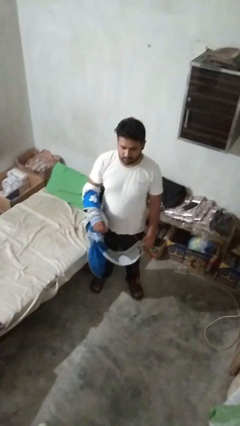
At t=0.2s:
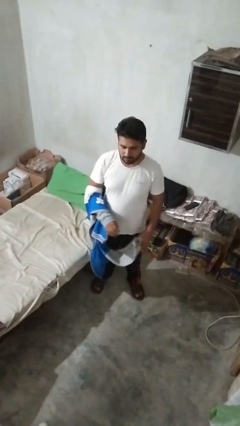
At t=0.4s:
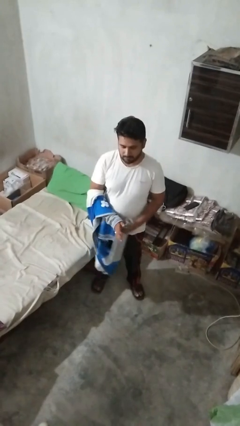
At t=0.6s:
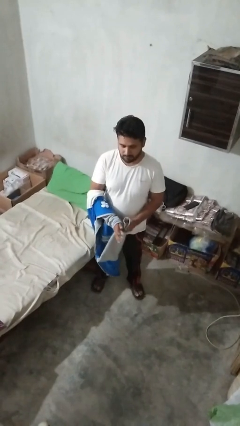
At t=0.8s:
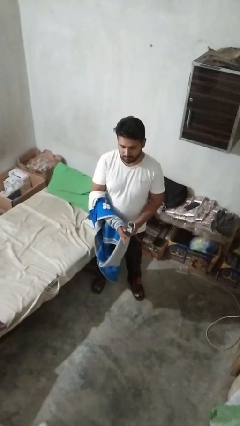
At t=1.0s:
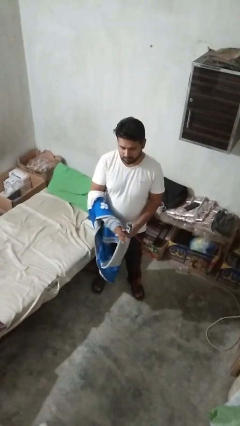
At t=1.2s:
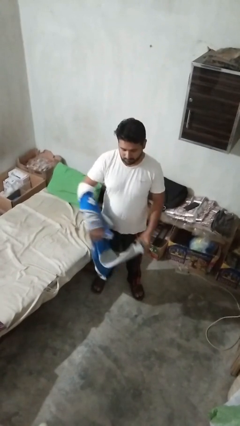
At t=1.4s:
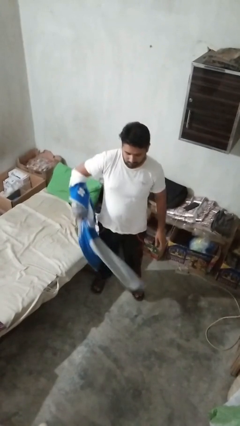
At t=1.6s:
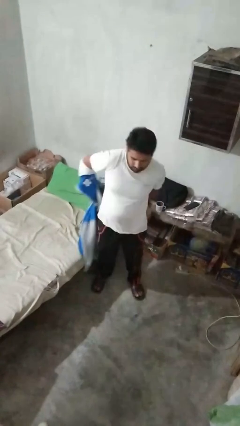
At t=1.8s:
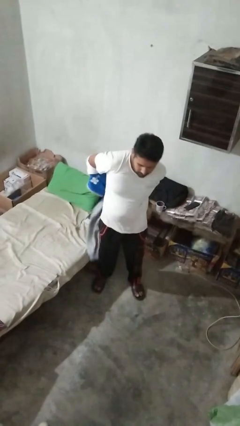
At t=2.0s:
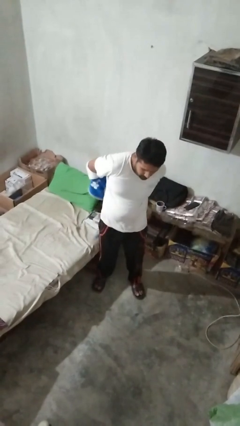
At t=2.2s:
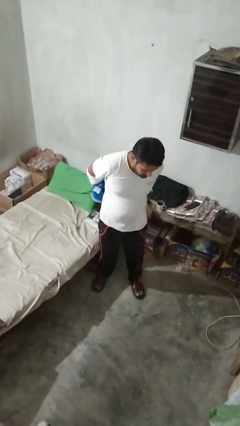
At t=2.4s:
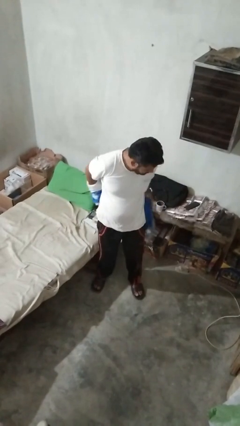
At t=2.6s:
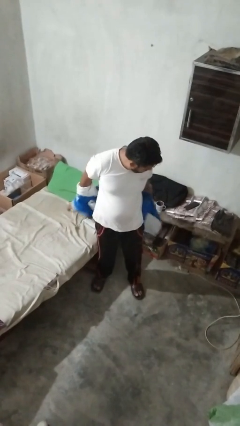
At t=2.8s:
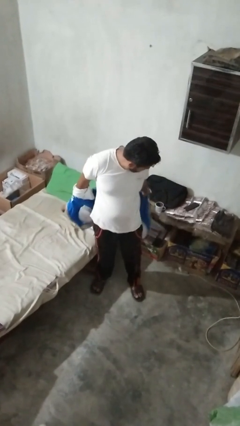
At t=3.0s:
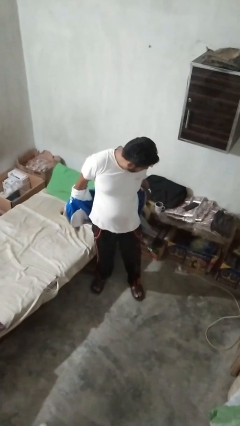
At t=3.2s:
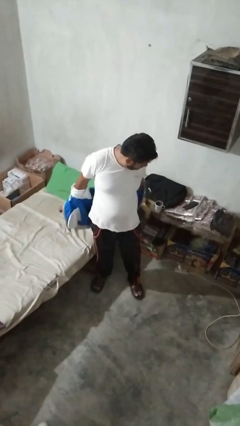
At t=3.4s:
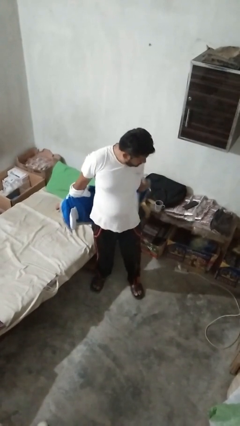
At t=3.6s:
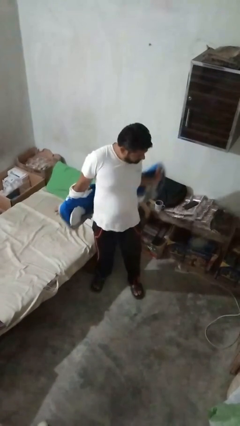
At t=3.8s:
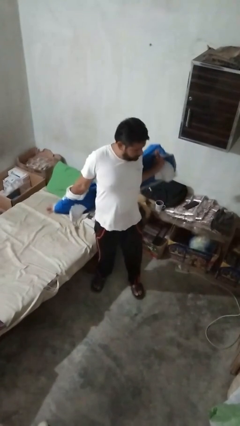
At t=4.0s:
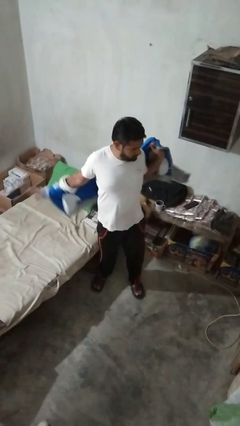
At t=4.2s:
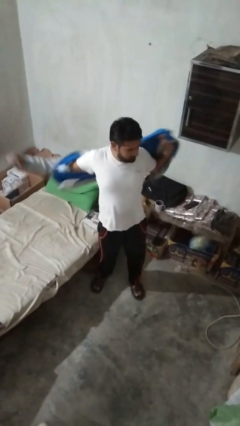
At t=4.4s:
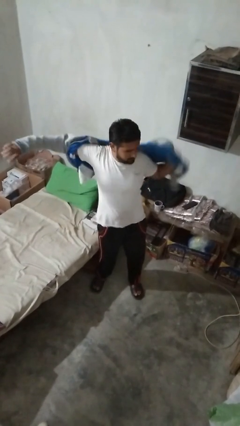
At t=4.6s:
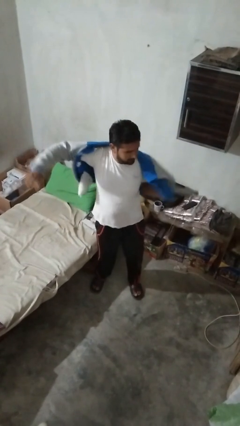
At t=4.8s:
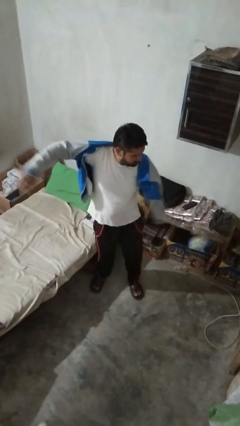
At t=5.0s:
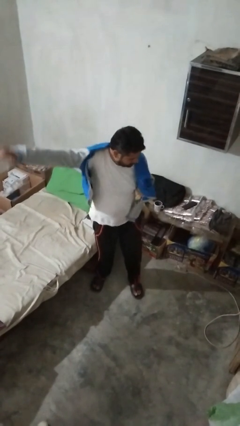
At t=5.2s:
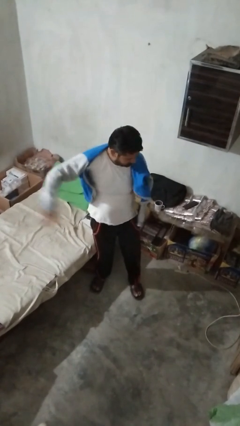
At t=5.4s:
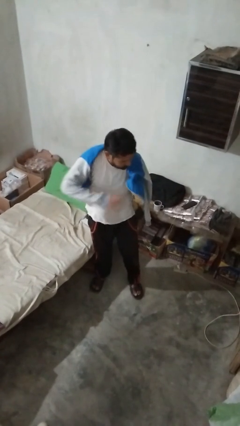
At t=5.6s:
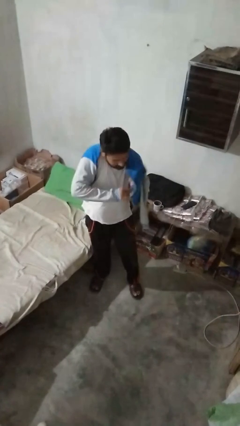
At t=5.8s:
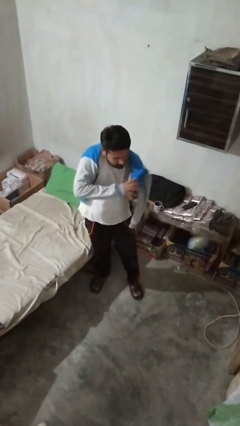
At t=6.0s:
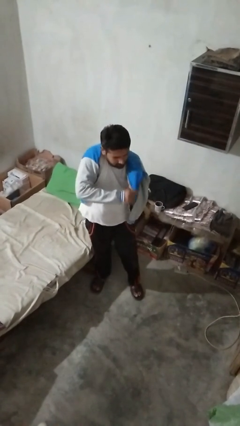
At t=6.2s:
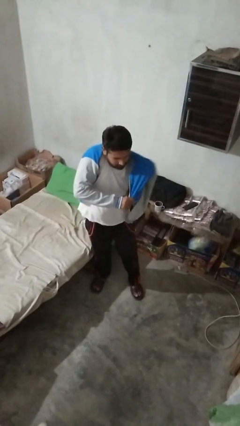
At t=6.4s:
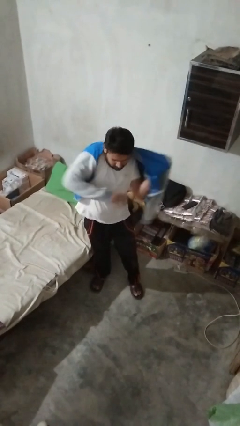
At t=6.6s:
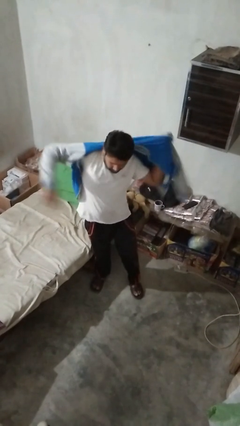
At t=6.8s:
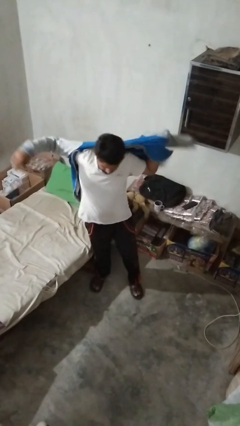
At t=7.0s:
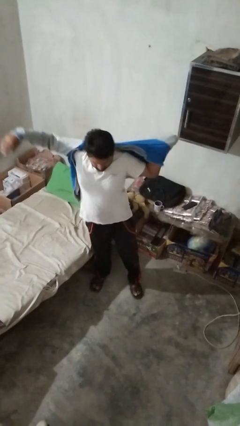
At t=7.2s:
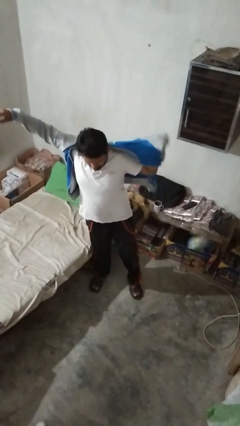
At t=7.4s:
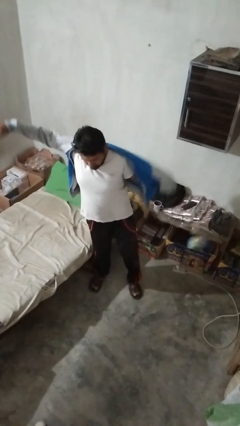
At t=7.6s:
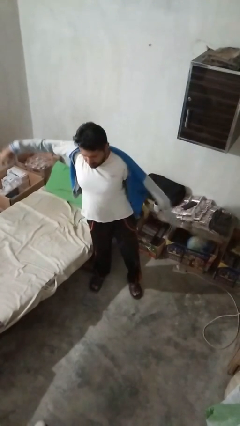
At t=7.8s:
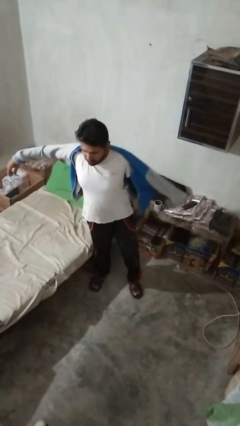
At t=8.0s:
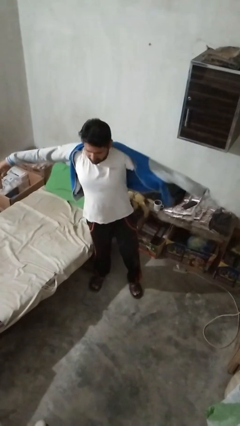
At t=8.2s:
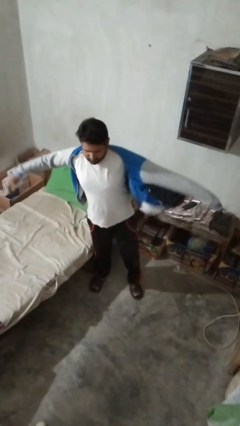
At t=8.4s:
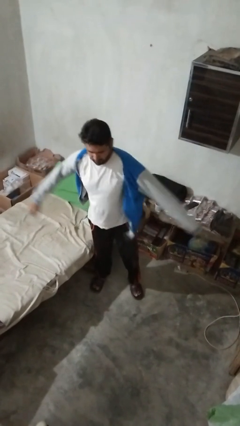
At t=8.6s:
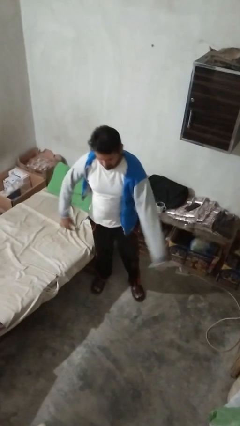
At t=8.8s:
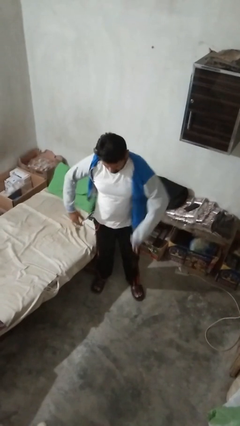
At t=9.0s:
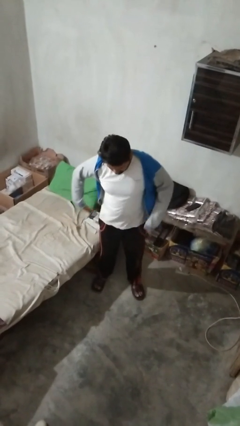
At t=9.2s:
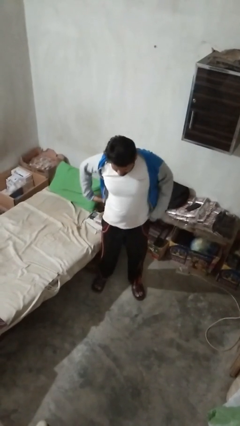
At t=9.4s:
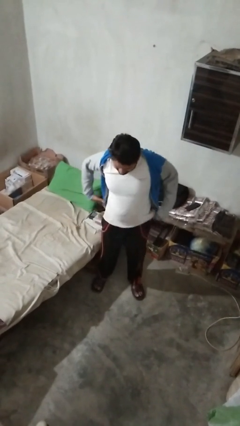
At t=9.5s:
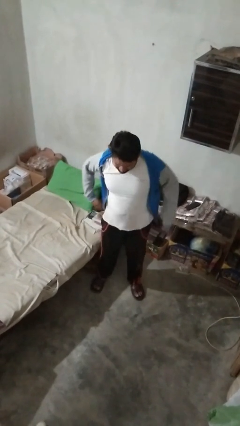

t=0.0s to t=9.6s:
person puts on jacket

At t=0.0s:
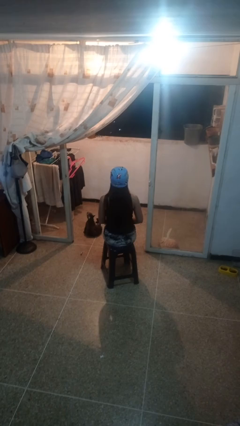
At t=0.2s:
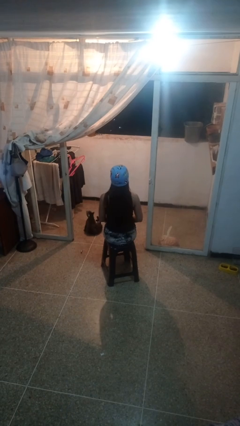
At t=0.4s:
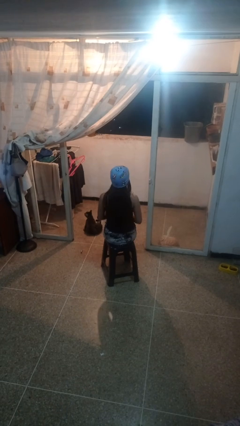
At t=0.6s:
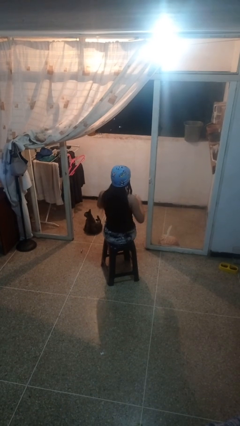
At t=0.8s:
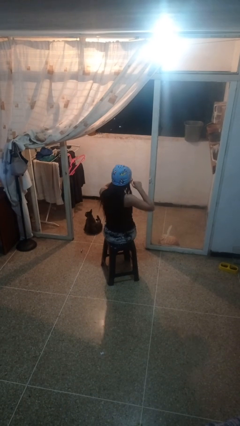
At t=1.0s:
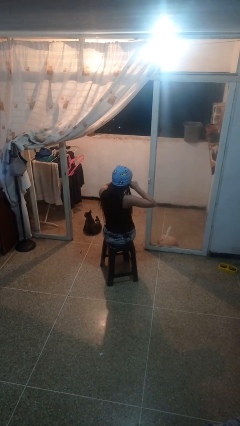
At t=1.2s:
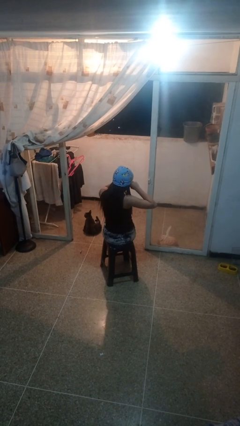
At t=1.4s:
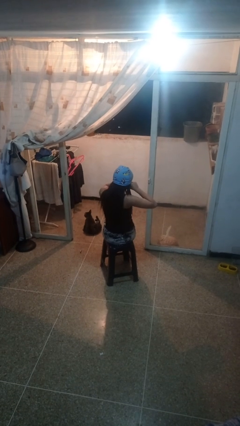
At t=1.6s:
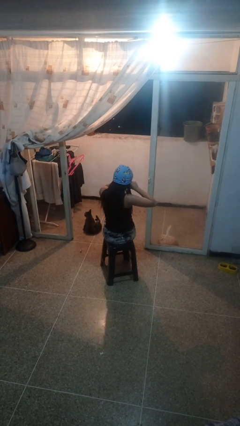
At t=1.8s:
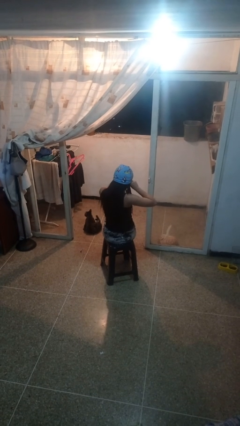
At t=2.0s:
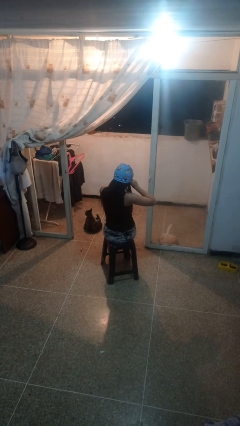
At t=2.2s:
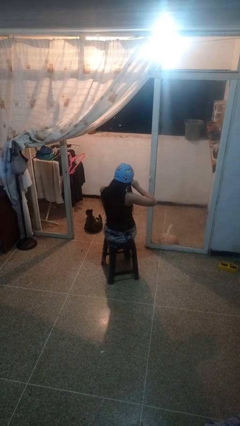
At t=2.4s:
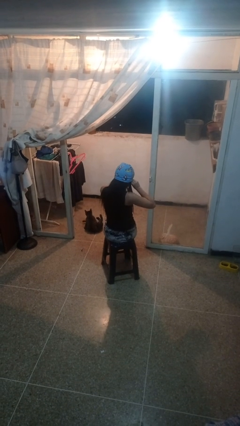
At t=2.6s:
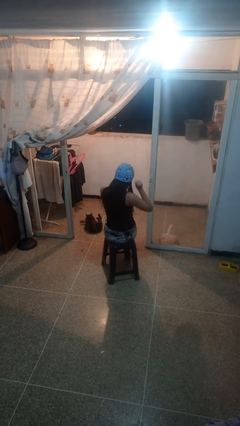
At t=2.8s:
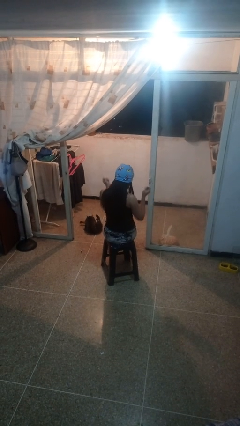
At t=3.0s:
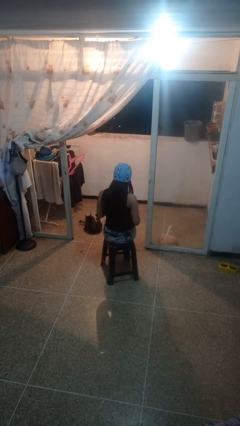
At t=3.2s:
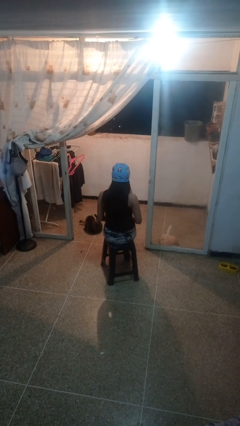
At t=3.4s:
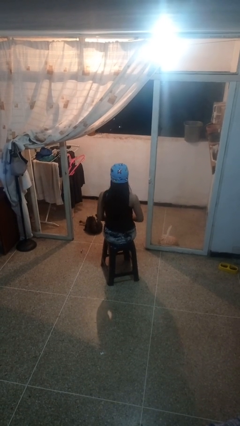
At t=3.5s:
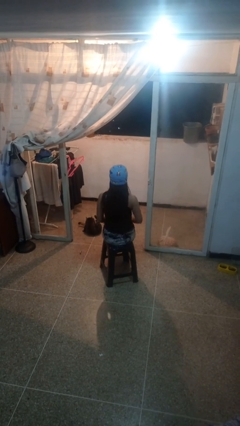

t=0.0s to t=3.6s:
person rubs eyes

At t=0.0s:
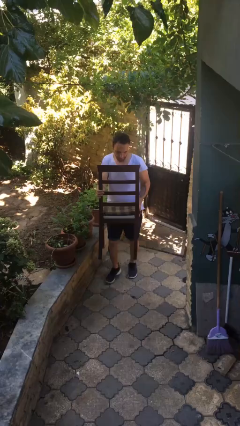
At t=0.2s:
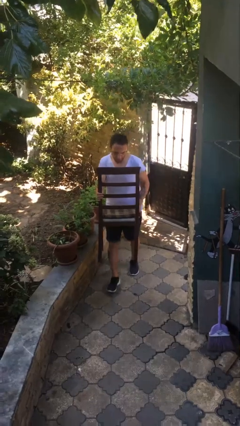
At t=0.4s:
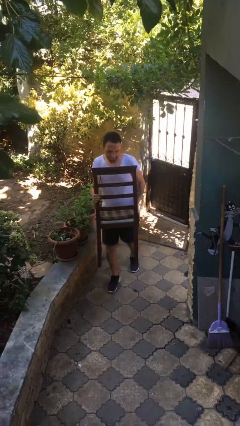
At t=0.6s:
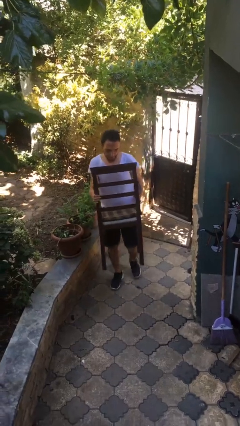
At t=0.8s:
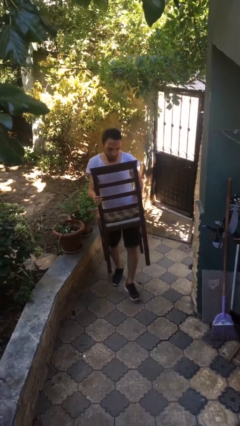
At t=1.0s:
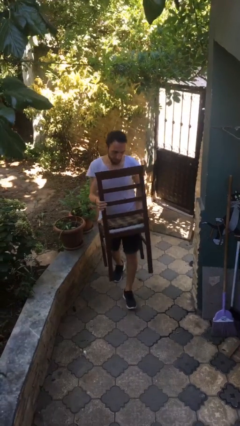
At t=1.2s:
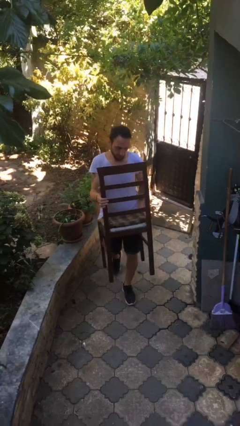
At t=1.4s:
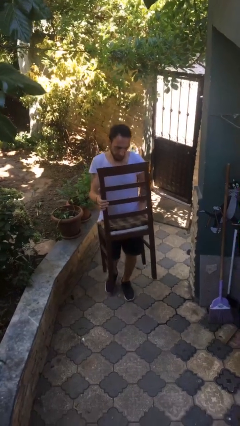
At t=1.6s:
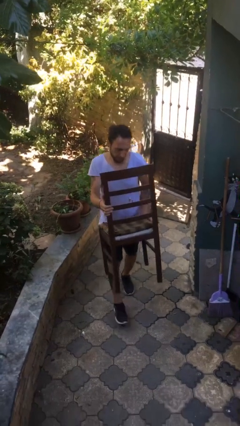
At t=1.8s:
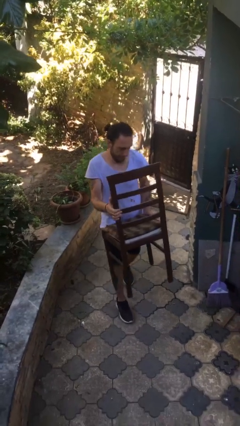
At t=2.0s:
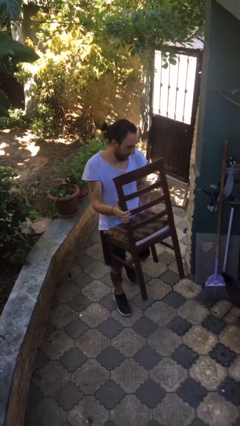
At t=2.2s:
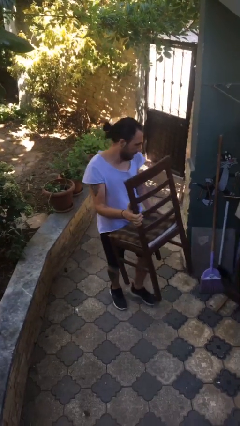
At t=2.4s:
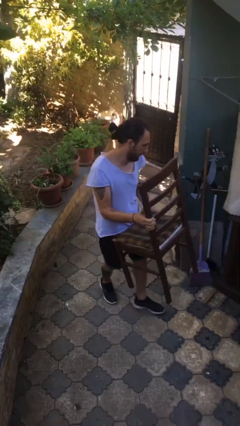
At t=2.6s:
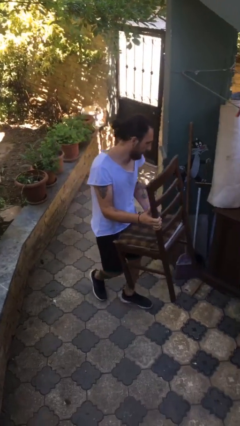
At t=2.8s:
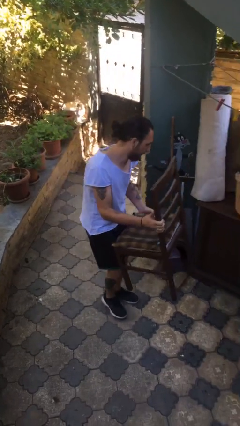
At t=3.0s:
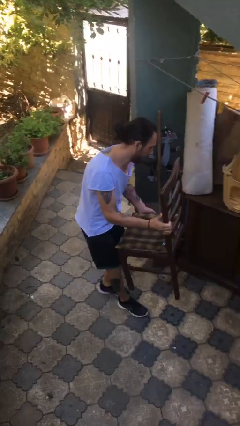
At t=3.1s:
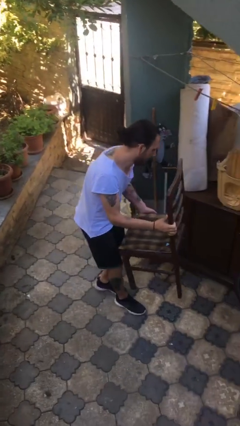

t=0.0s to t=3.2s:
person carries heavy object

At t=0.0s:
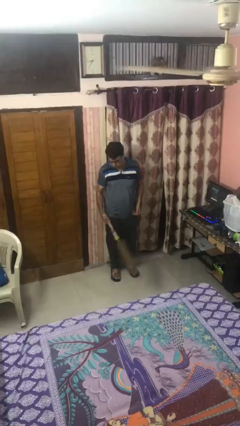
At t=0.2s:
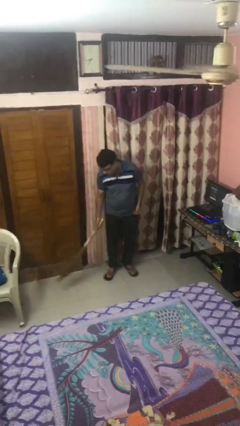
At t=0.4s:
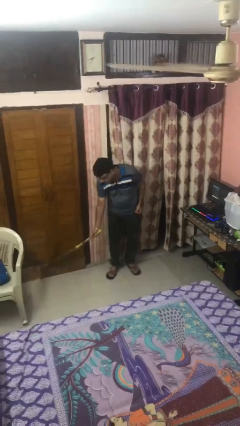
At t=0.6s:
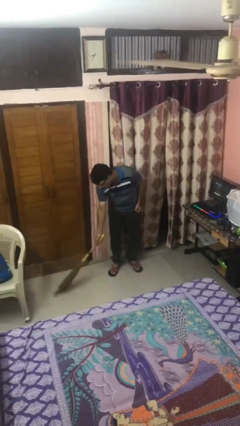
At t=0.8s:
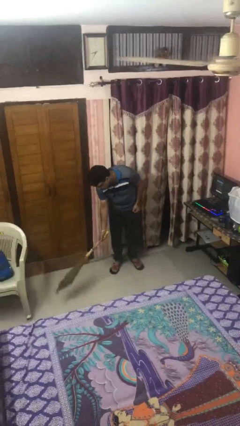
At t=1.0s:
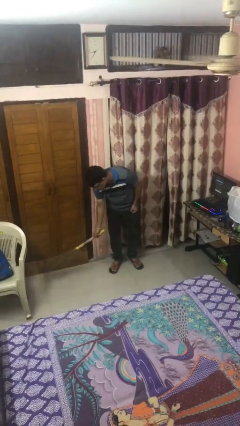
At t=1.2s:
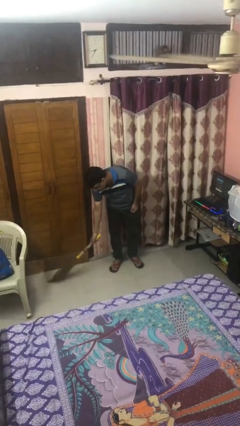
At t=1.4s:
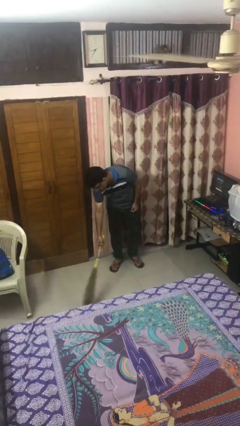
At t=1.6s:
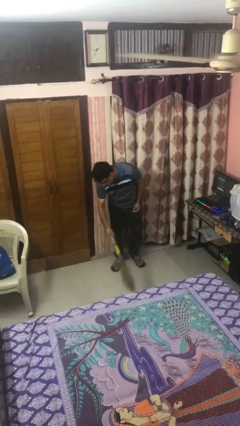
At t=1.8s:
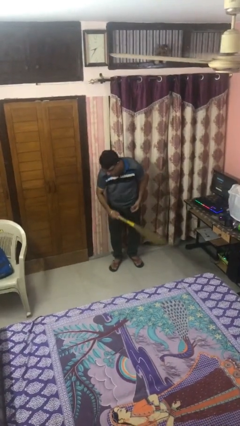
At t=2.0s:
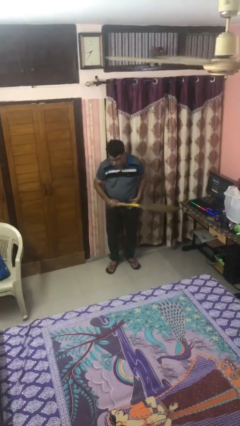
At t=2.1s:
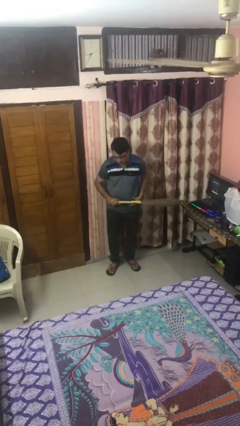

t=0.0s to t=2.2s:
person sweeps floor
